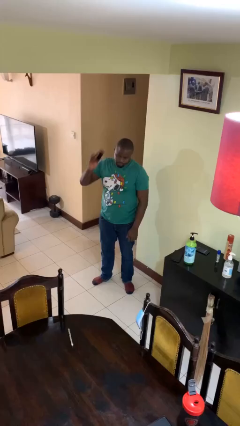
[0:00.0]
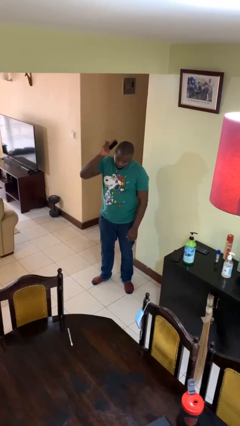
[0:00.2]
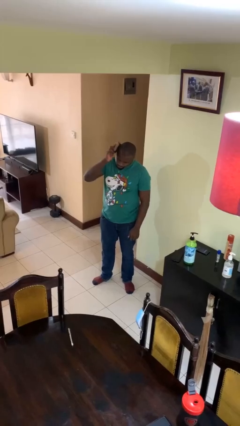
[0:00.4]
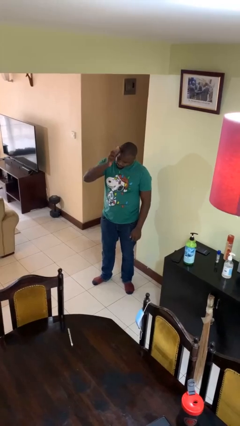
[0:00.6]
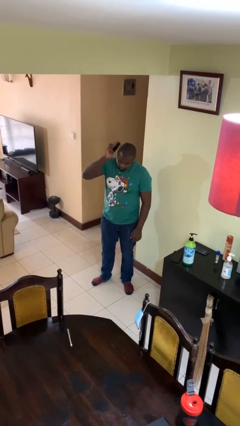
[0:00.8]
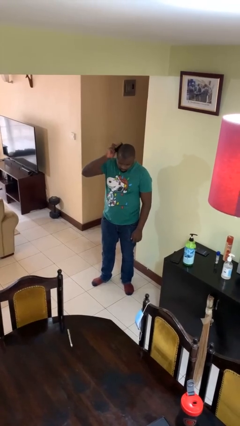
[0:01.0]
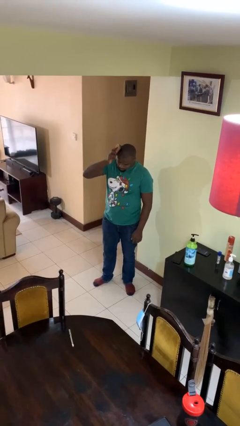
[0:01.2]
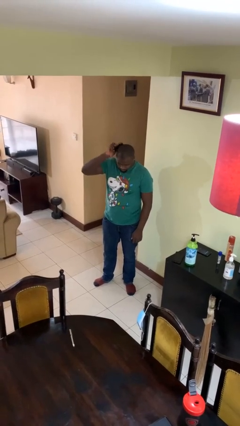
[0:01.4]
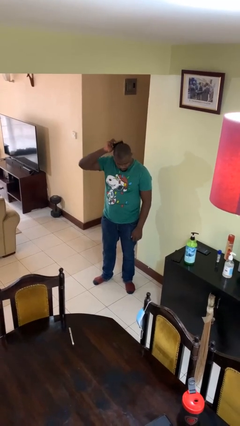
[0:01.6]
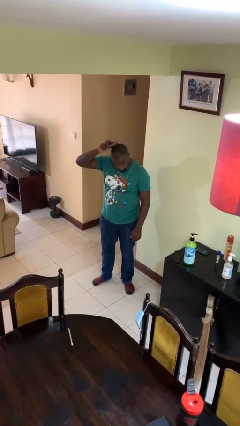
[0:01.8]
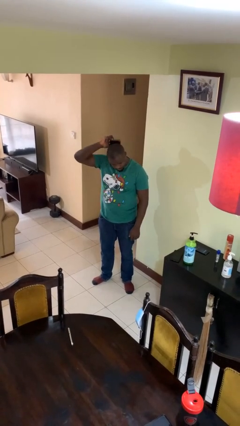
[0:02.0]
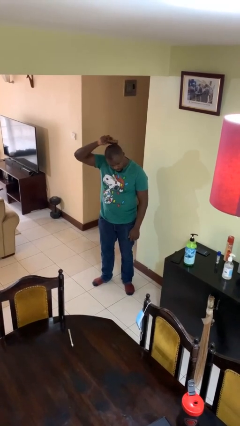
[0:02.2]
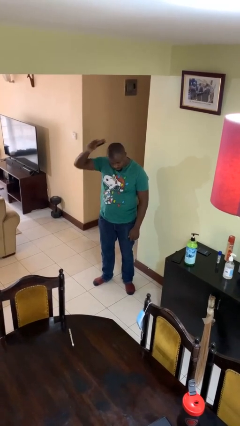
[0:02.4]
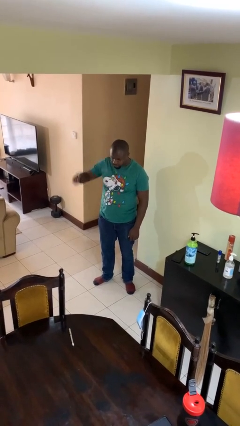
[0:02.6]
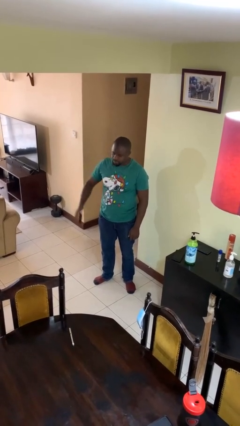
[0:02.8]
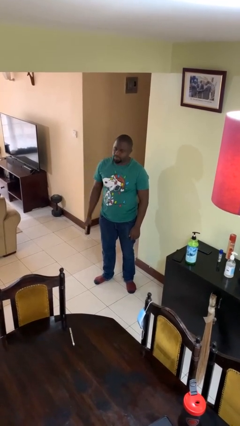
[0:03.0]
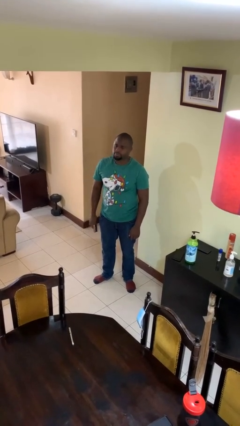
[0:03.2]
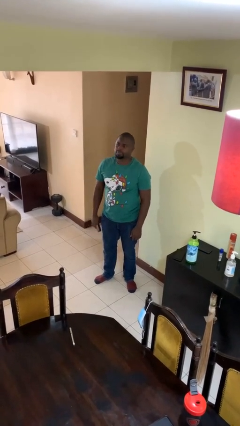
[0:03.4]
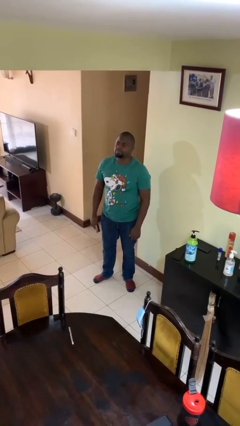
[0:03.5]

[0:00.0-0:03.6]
person brushes hair

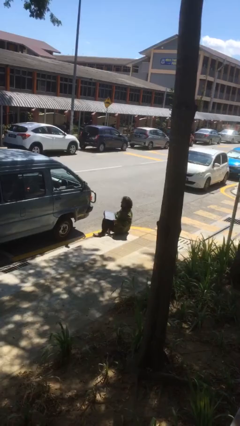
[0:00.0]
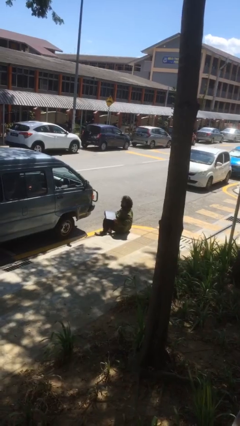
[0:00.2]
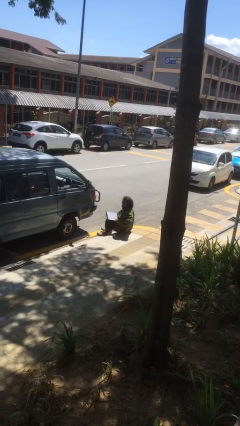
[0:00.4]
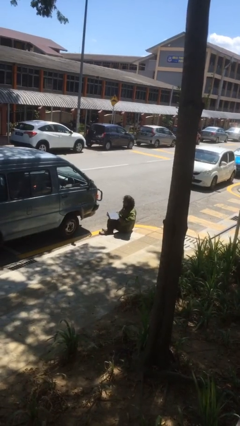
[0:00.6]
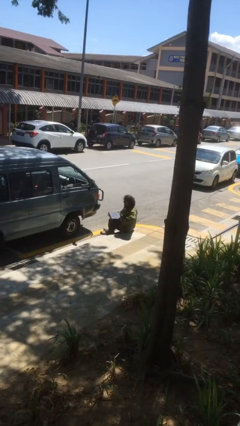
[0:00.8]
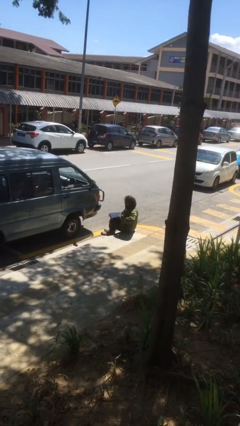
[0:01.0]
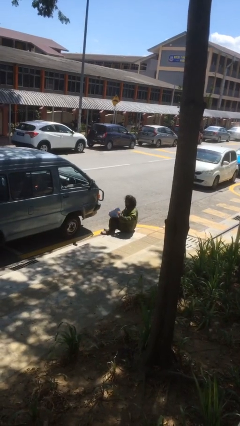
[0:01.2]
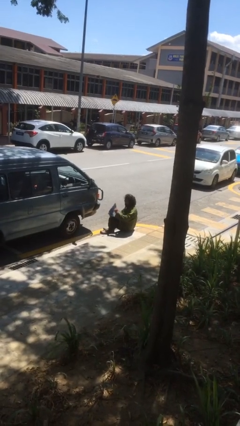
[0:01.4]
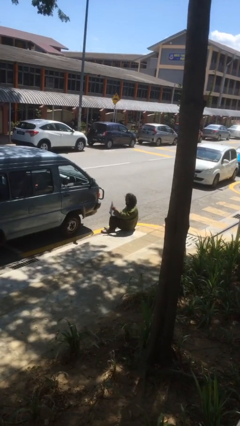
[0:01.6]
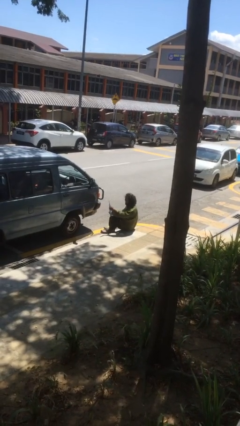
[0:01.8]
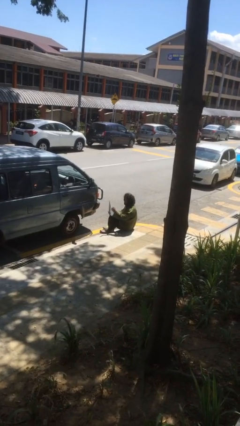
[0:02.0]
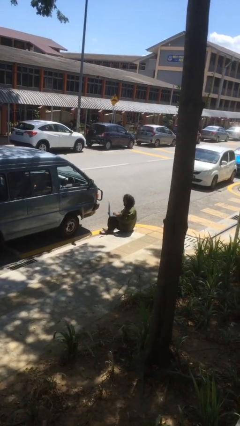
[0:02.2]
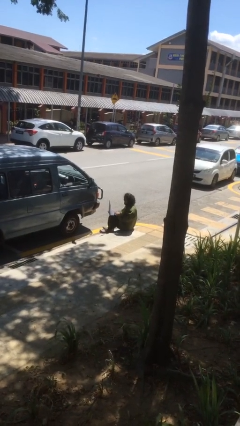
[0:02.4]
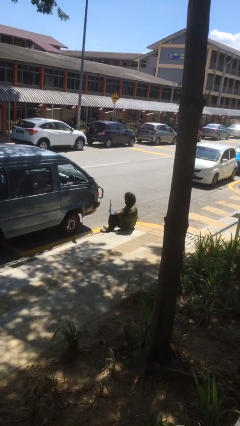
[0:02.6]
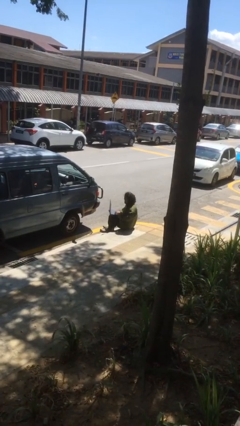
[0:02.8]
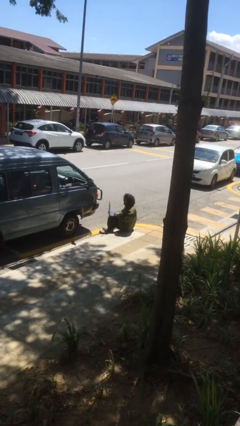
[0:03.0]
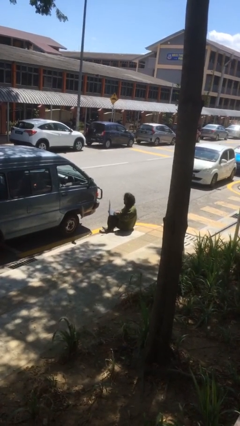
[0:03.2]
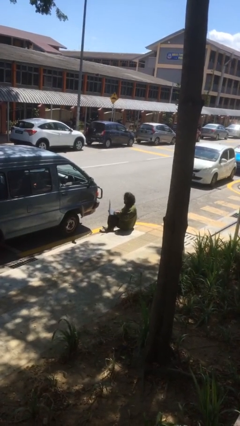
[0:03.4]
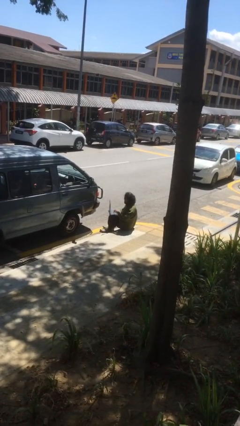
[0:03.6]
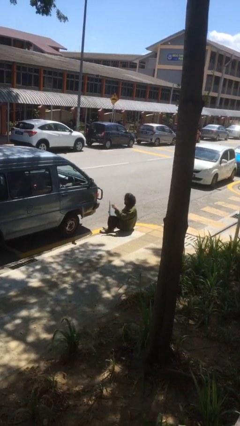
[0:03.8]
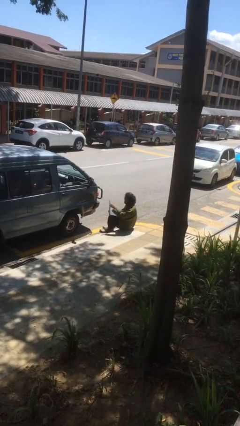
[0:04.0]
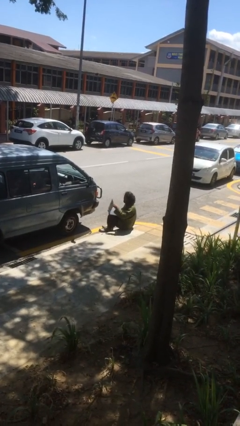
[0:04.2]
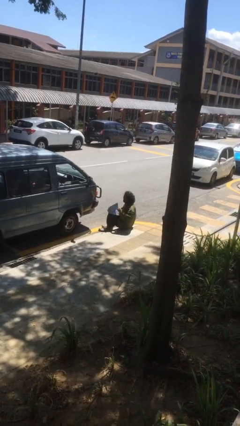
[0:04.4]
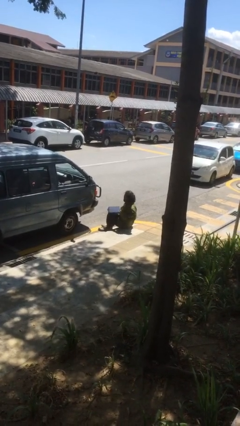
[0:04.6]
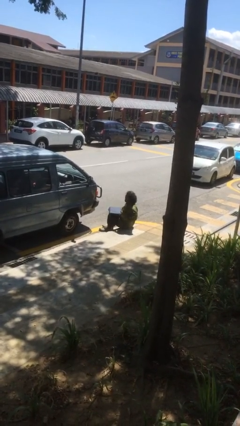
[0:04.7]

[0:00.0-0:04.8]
person interacts with laptop

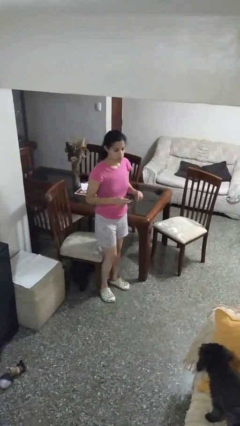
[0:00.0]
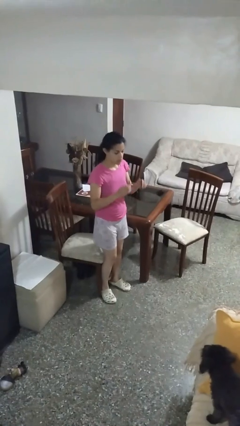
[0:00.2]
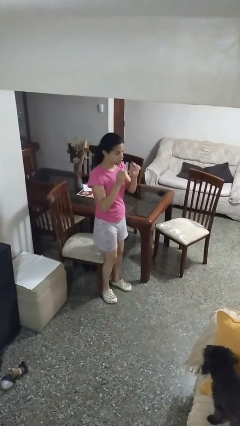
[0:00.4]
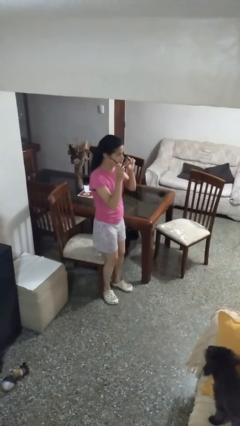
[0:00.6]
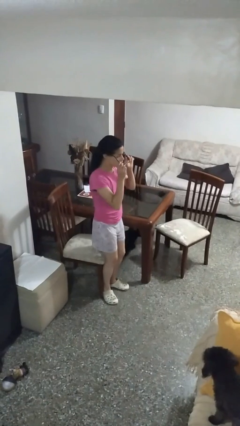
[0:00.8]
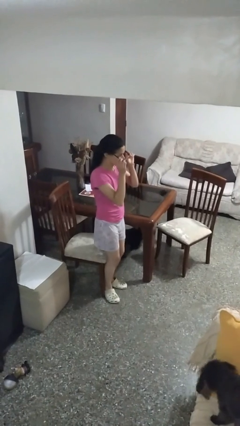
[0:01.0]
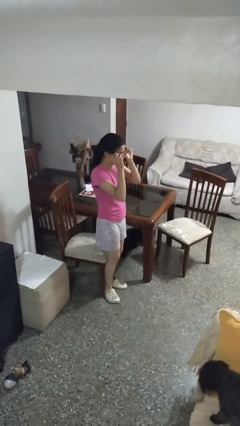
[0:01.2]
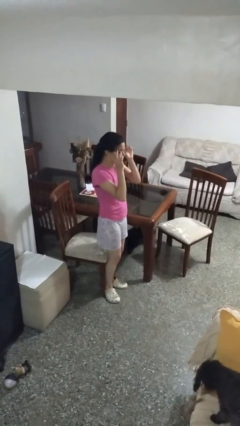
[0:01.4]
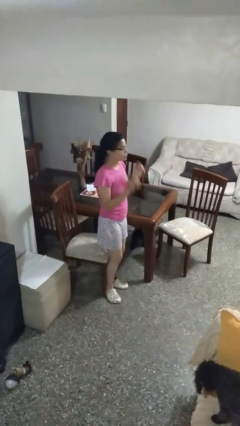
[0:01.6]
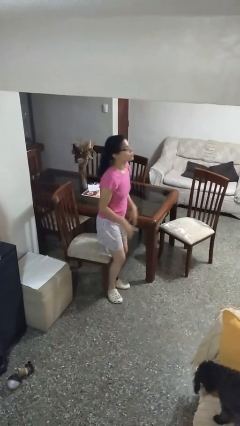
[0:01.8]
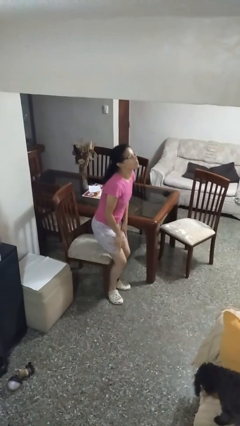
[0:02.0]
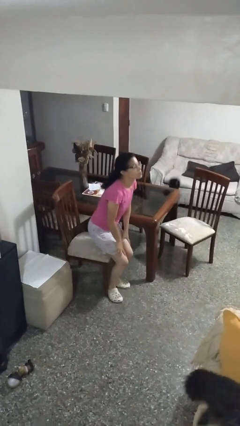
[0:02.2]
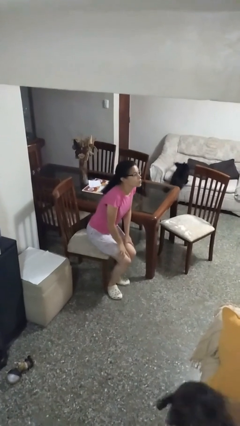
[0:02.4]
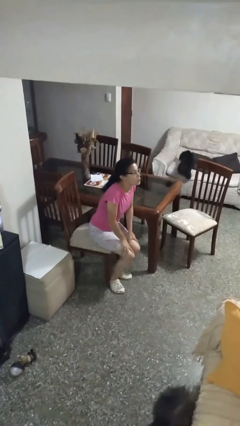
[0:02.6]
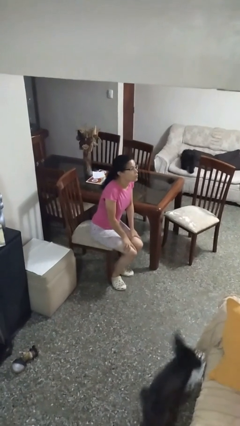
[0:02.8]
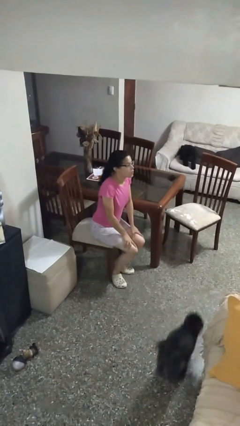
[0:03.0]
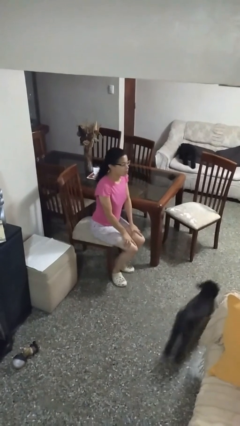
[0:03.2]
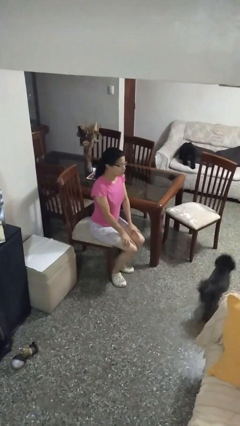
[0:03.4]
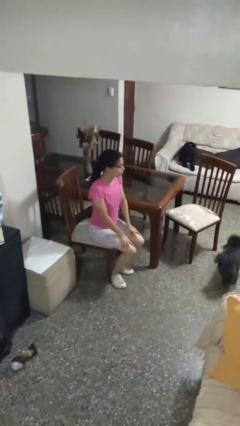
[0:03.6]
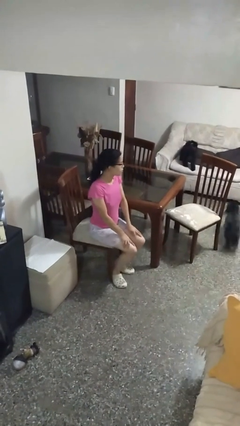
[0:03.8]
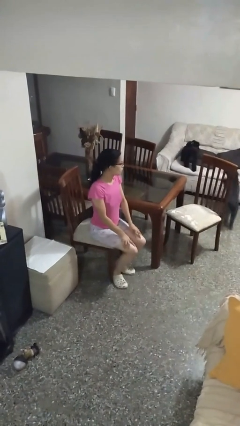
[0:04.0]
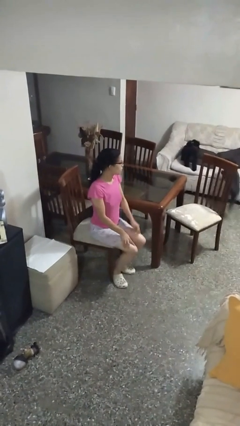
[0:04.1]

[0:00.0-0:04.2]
person puts on glasses

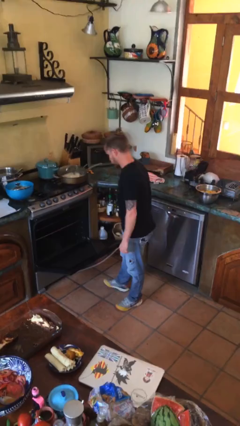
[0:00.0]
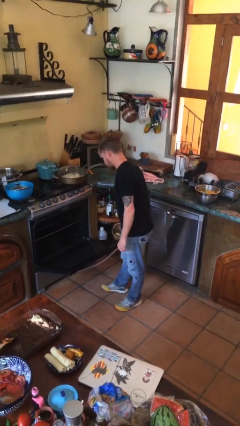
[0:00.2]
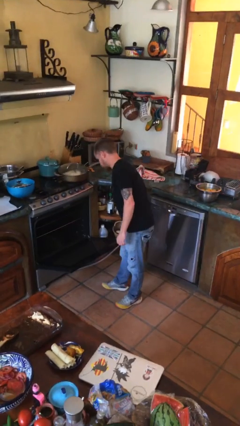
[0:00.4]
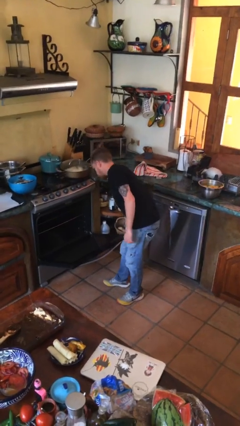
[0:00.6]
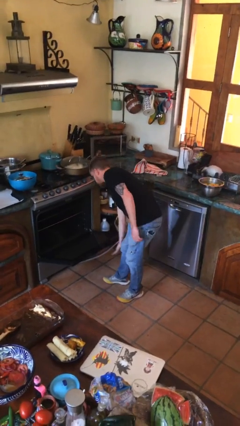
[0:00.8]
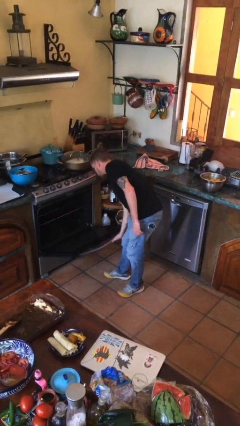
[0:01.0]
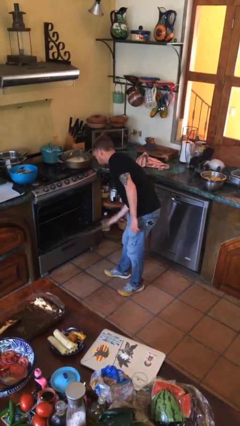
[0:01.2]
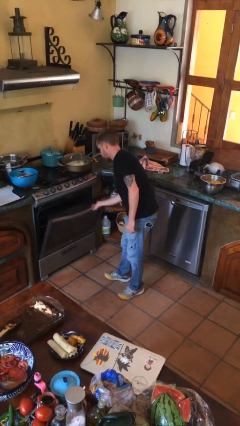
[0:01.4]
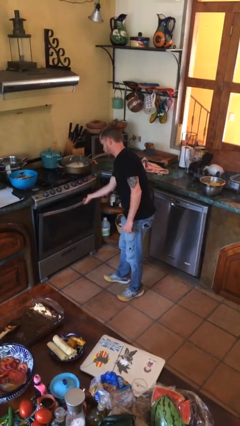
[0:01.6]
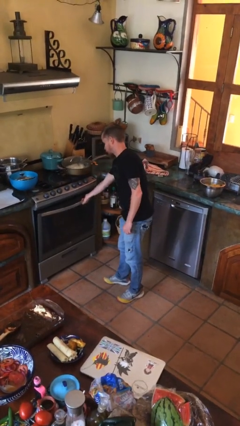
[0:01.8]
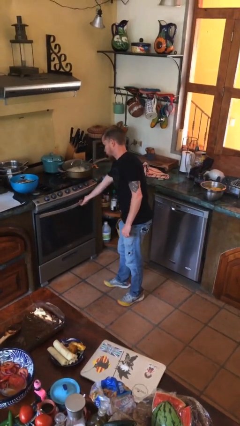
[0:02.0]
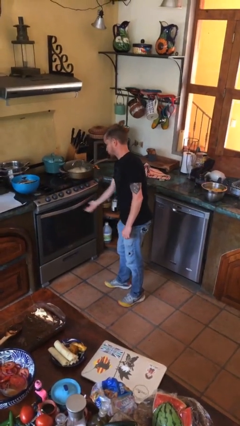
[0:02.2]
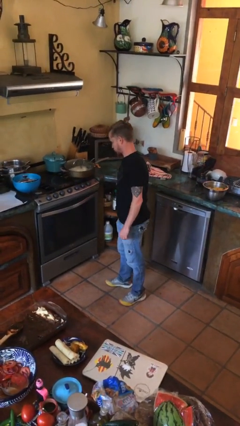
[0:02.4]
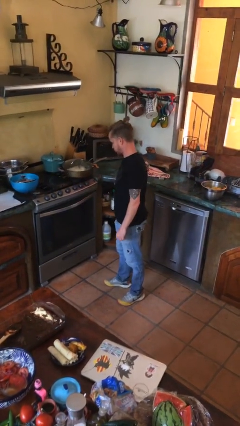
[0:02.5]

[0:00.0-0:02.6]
person closes oven door

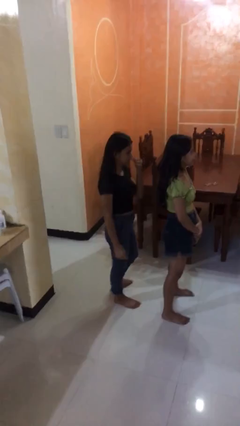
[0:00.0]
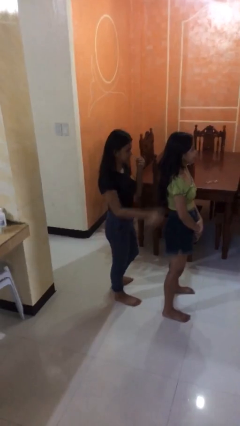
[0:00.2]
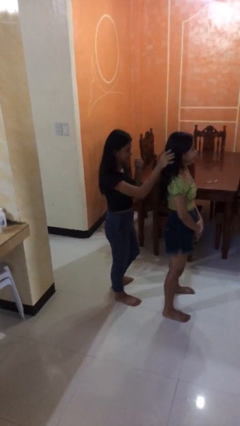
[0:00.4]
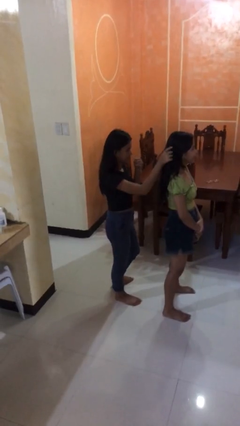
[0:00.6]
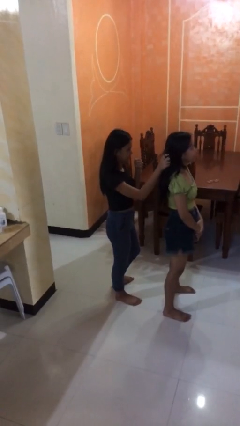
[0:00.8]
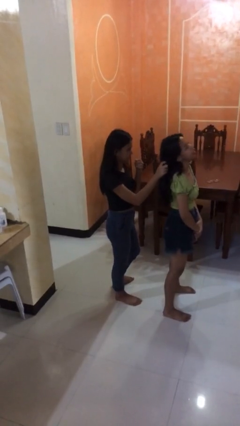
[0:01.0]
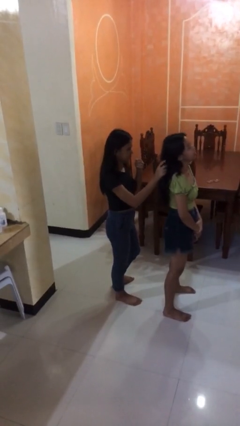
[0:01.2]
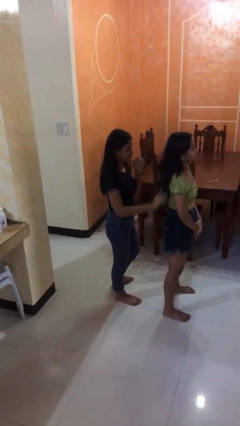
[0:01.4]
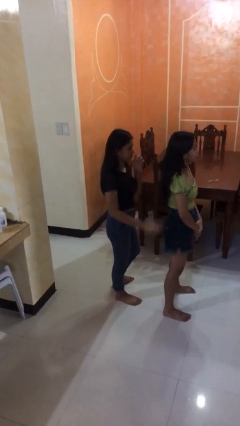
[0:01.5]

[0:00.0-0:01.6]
person grabs person by hair

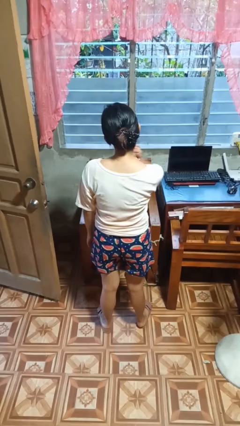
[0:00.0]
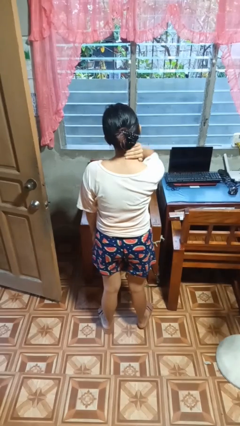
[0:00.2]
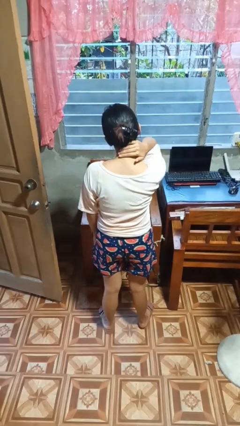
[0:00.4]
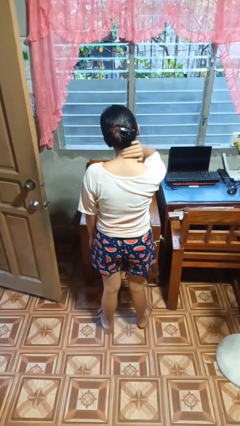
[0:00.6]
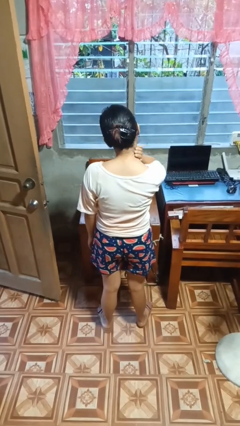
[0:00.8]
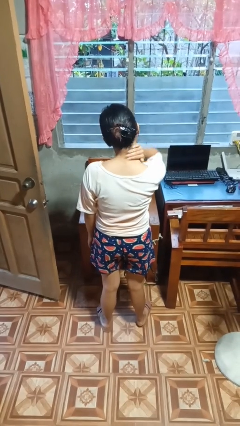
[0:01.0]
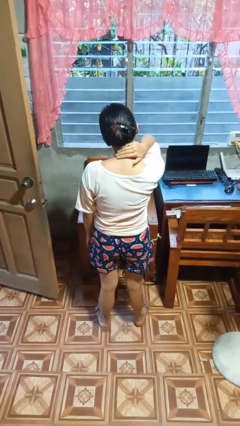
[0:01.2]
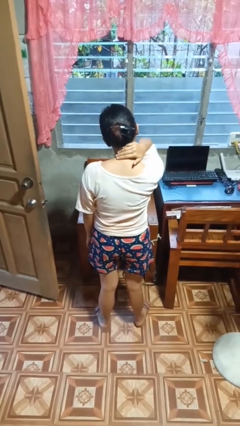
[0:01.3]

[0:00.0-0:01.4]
person rubs neck
